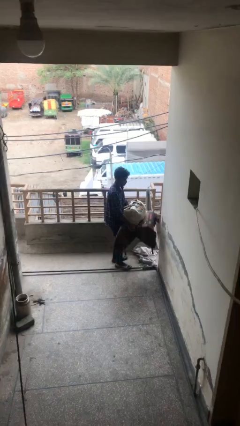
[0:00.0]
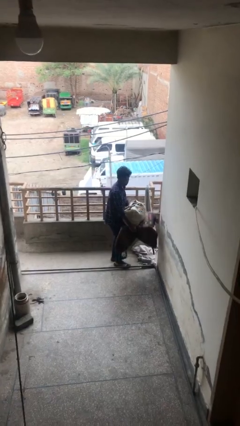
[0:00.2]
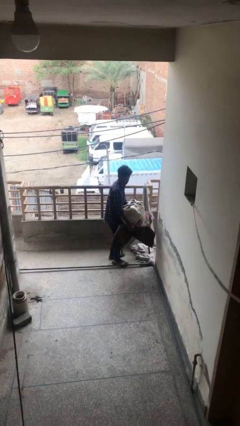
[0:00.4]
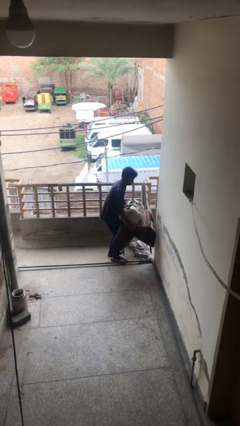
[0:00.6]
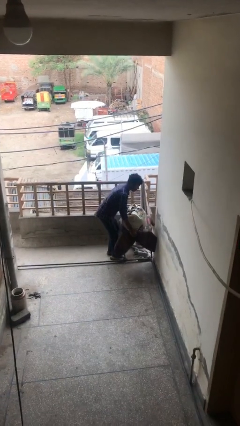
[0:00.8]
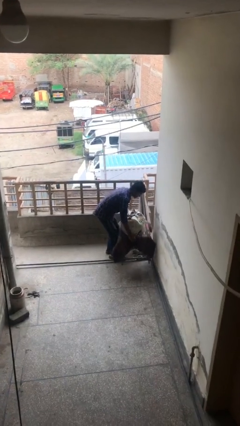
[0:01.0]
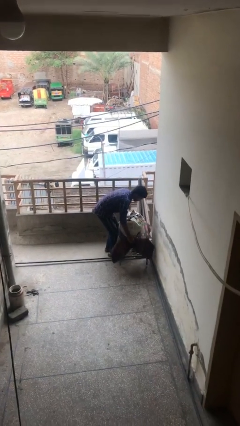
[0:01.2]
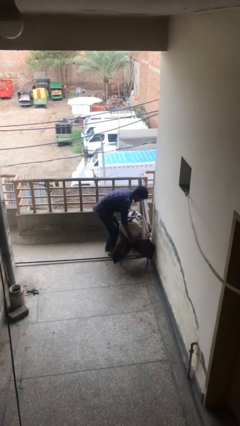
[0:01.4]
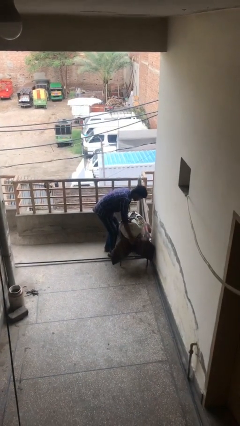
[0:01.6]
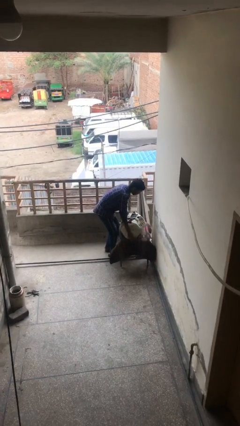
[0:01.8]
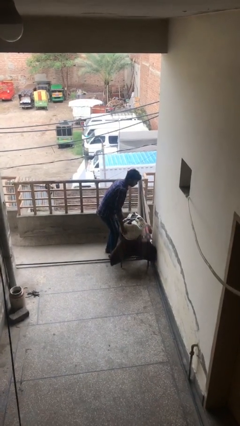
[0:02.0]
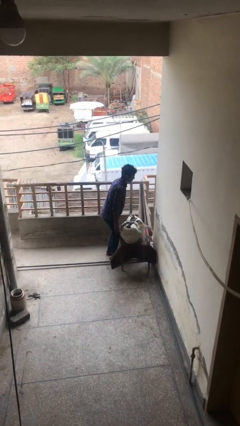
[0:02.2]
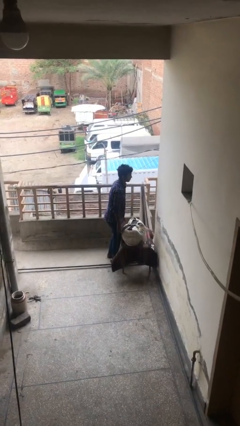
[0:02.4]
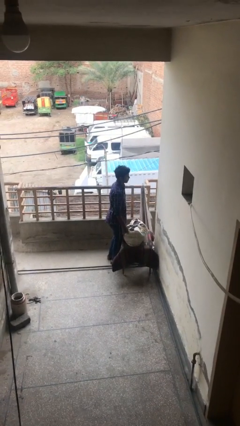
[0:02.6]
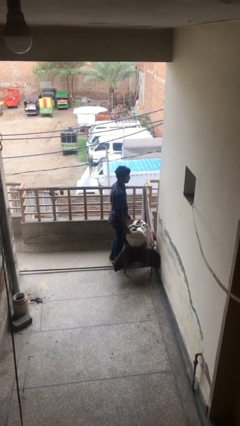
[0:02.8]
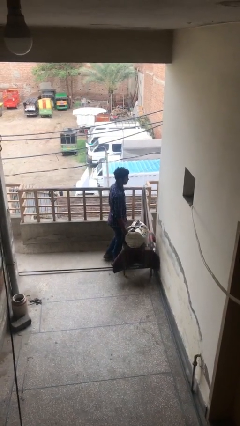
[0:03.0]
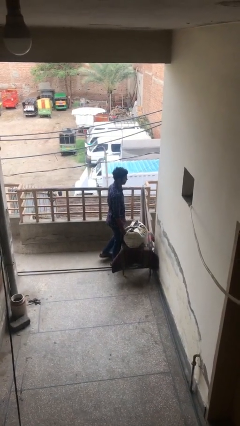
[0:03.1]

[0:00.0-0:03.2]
person puts down object on floor

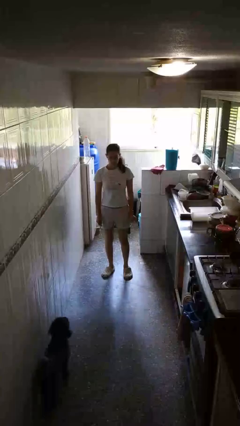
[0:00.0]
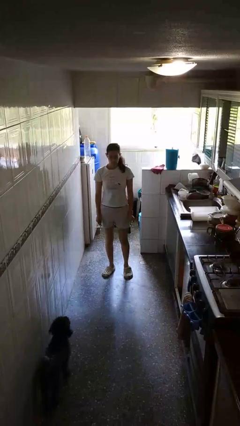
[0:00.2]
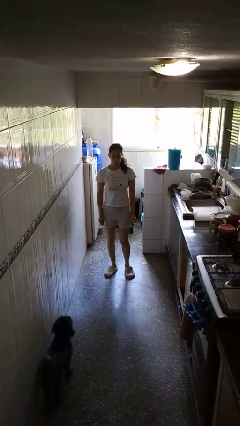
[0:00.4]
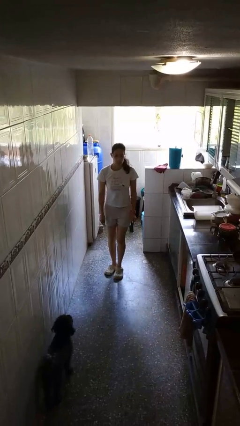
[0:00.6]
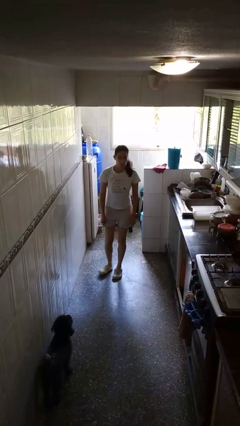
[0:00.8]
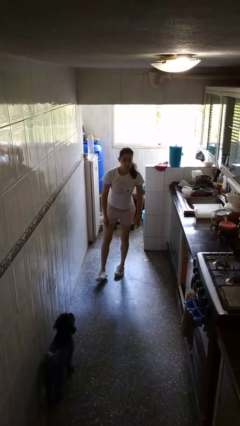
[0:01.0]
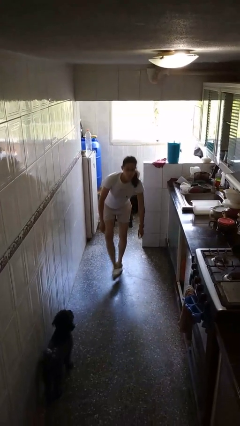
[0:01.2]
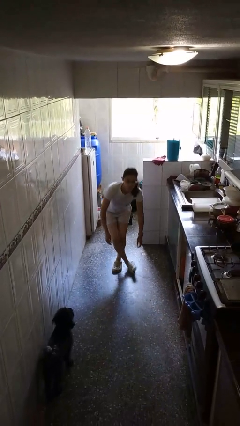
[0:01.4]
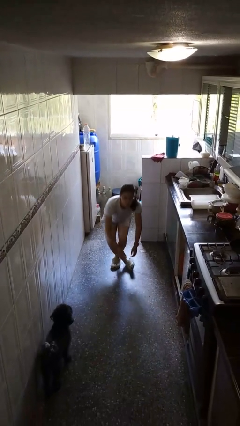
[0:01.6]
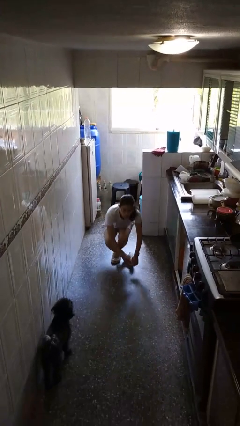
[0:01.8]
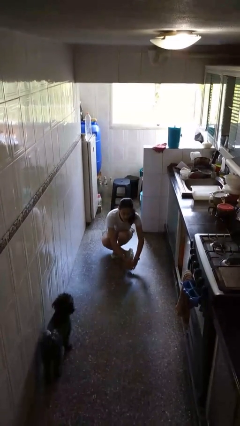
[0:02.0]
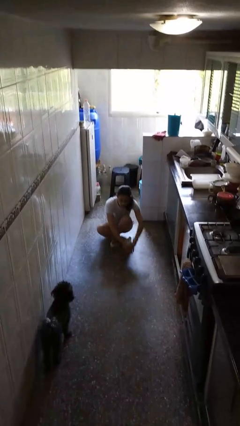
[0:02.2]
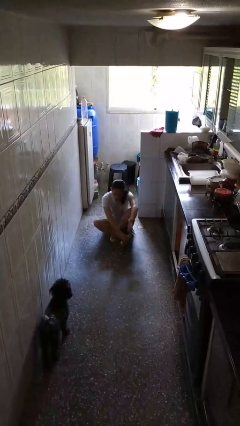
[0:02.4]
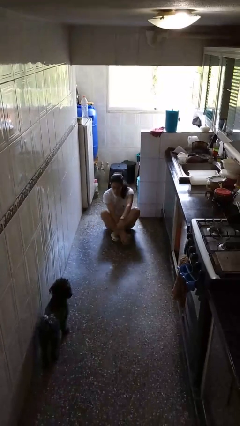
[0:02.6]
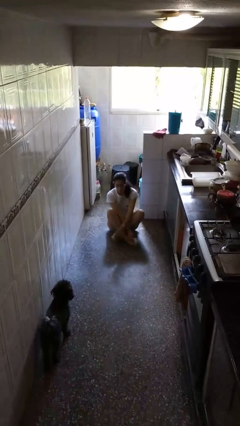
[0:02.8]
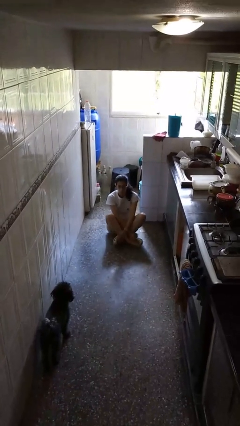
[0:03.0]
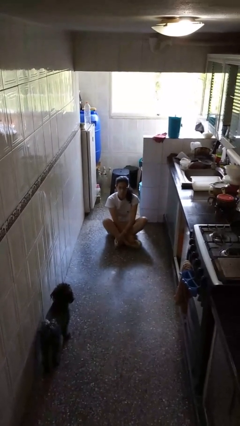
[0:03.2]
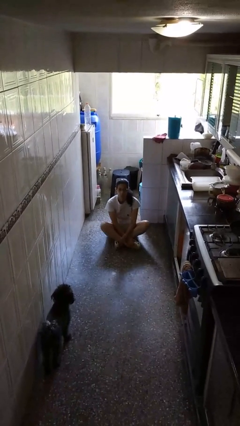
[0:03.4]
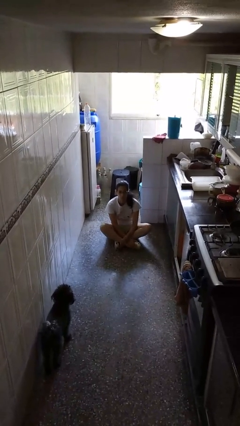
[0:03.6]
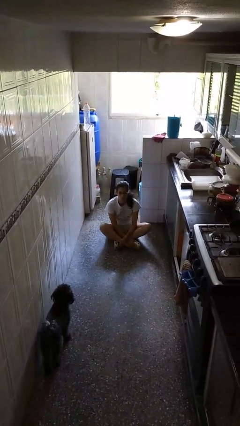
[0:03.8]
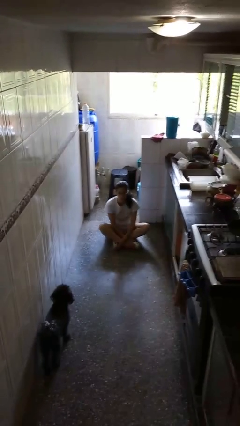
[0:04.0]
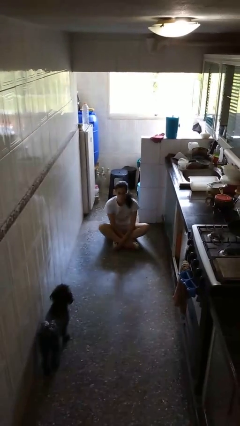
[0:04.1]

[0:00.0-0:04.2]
person sits crisscross

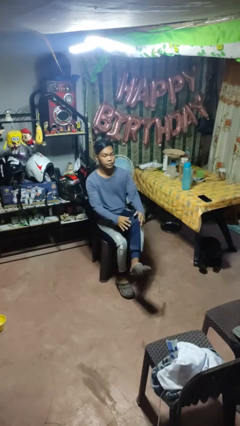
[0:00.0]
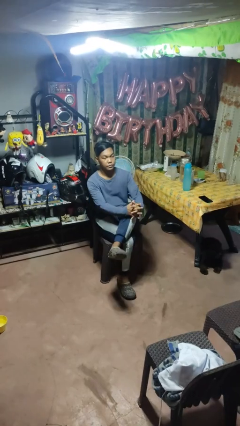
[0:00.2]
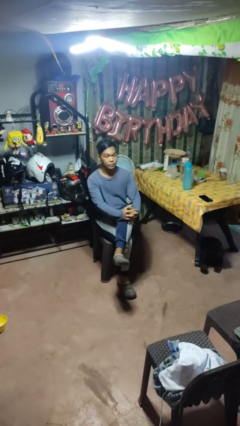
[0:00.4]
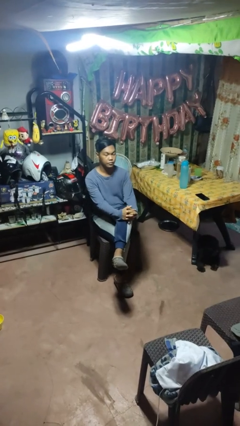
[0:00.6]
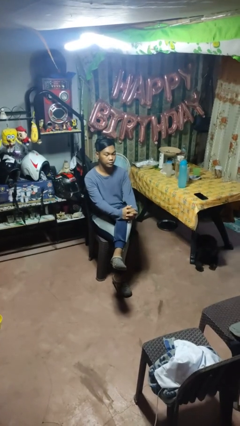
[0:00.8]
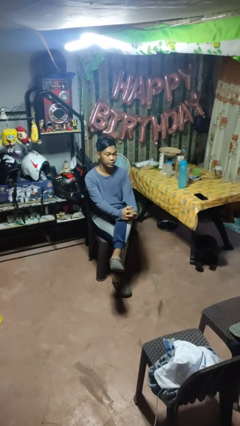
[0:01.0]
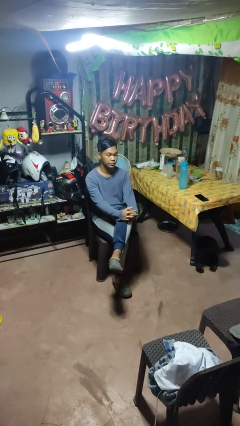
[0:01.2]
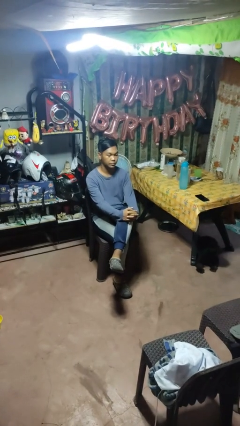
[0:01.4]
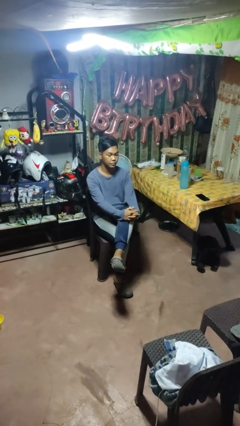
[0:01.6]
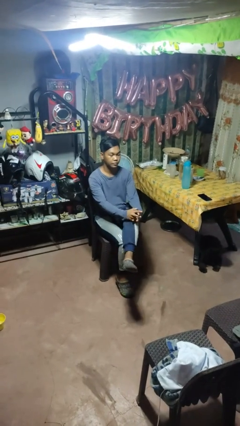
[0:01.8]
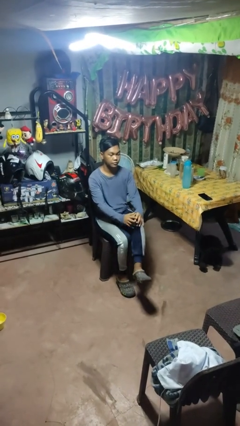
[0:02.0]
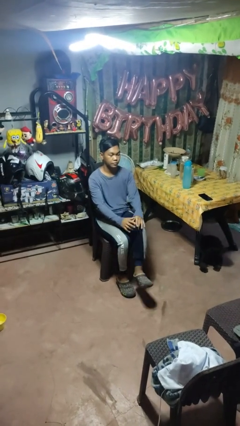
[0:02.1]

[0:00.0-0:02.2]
person crosses legs

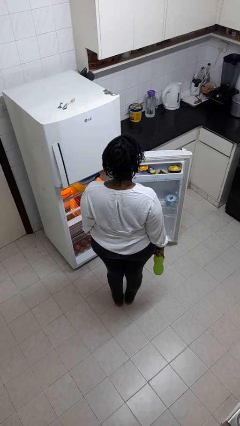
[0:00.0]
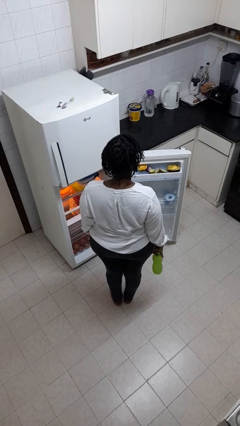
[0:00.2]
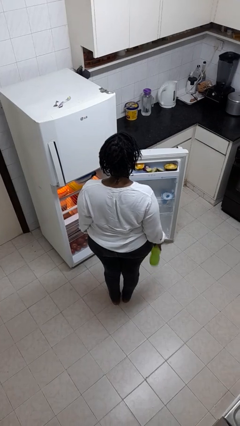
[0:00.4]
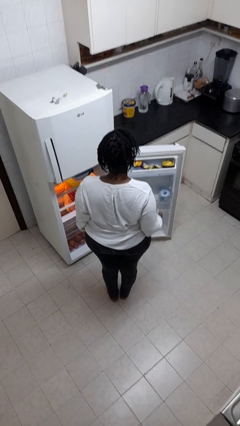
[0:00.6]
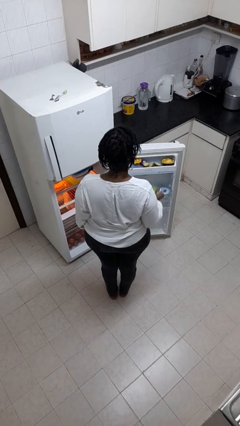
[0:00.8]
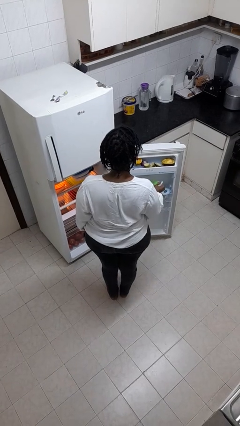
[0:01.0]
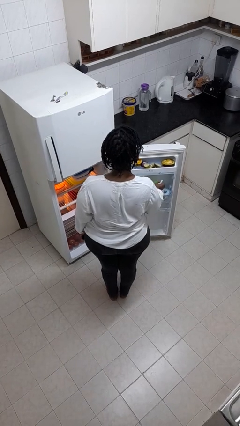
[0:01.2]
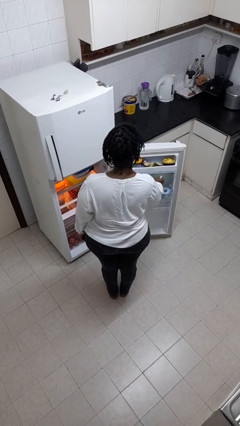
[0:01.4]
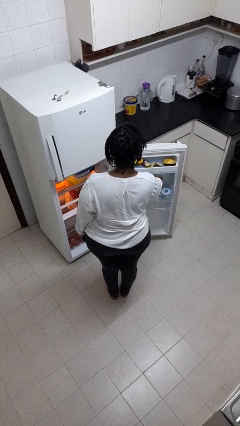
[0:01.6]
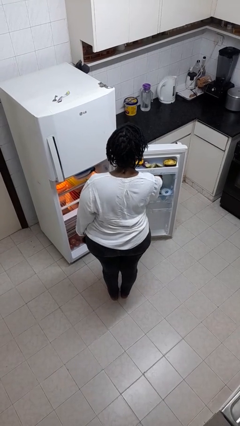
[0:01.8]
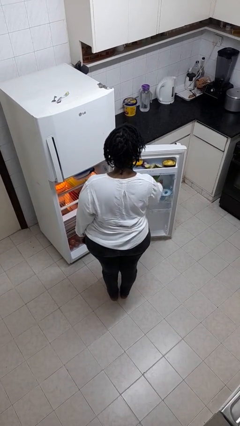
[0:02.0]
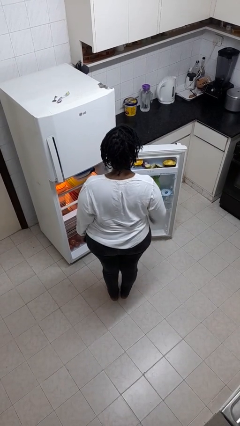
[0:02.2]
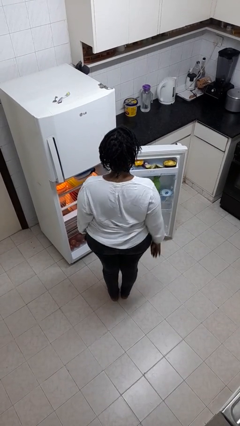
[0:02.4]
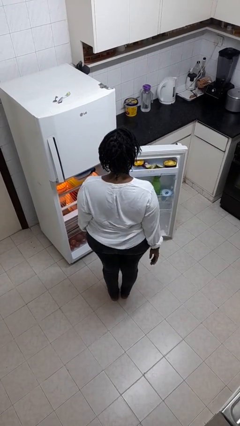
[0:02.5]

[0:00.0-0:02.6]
person puts object into refrigerator

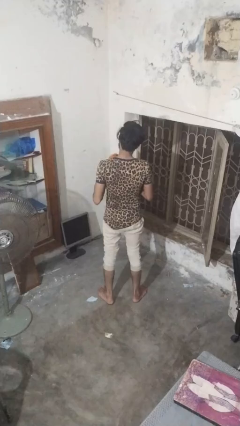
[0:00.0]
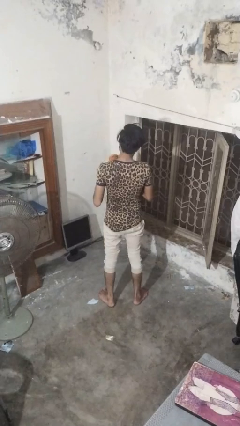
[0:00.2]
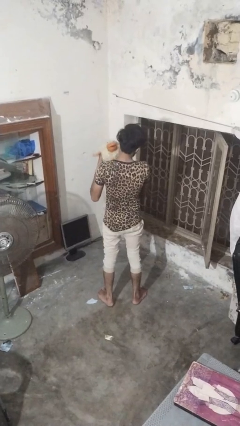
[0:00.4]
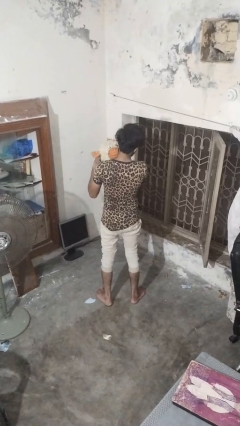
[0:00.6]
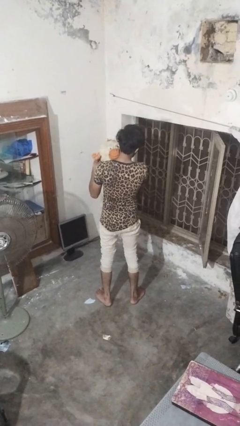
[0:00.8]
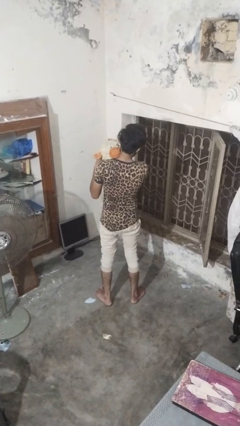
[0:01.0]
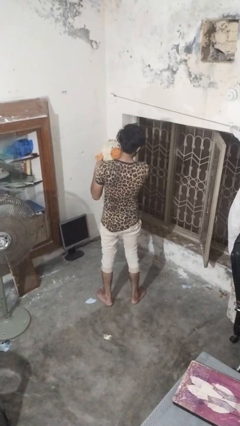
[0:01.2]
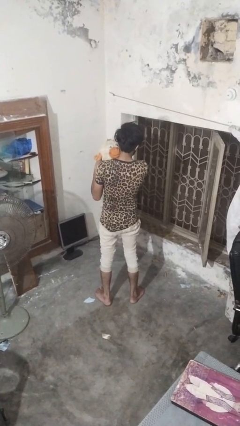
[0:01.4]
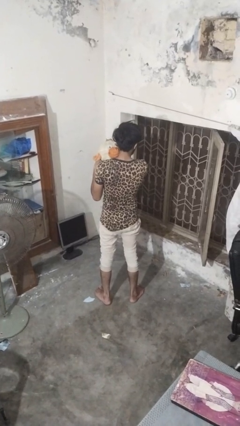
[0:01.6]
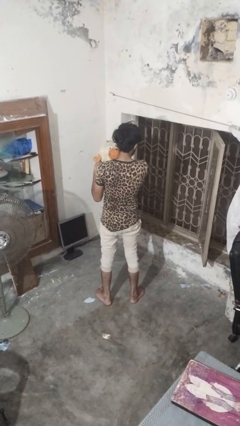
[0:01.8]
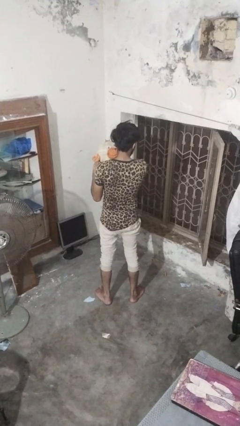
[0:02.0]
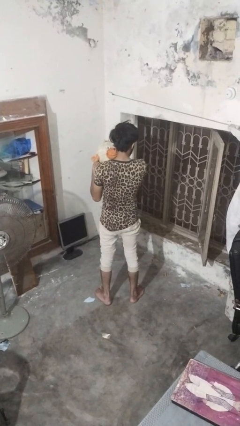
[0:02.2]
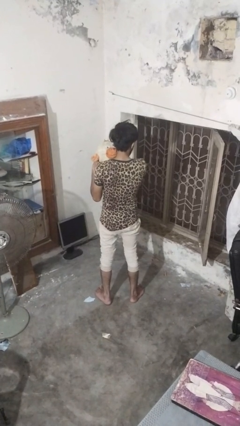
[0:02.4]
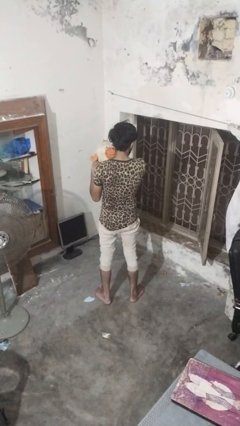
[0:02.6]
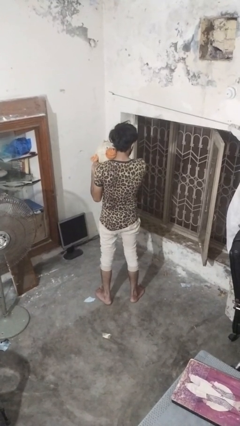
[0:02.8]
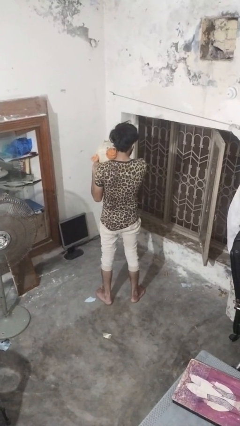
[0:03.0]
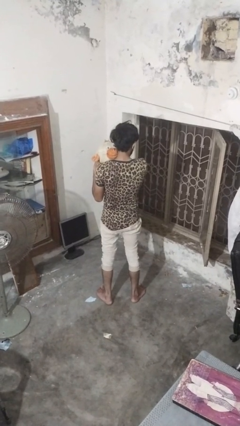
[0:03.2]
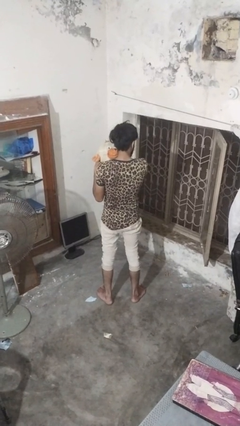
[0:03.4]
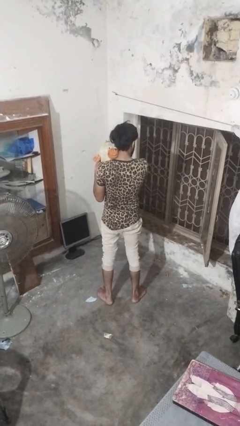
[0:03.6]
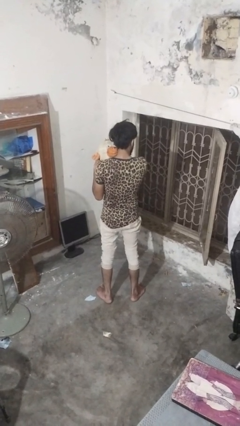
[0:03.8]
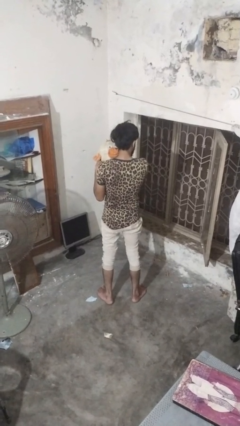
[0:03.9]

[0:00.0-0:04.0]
person hugs stuffed animal

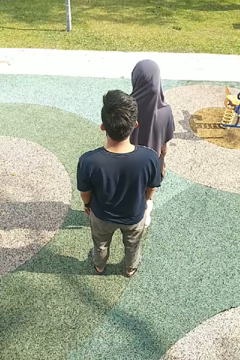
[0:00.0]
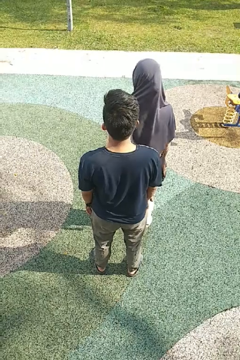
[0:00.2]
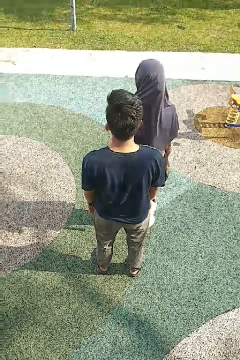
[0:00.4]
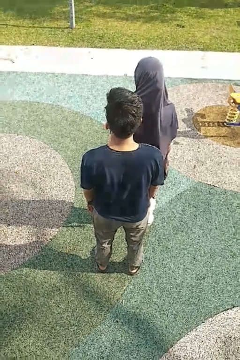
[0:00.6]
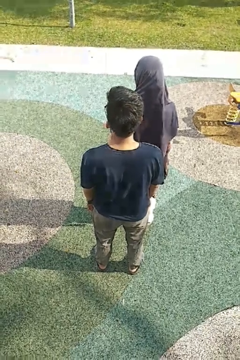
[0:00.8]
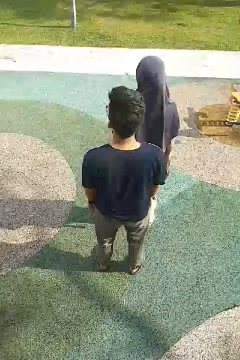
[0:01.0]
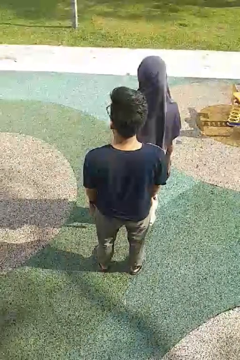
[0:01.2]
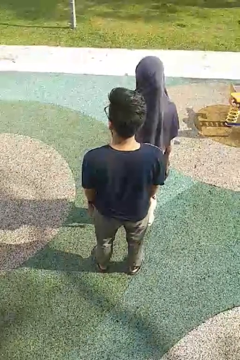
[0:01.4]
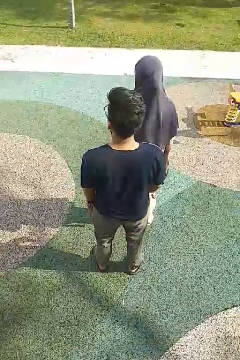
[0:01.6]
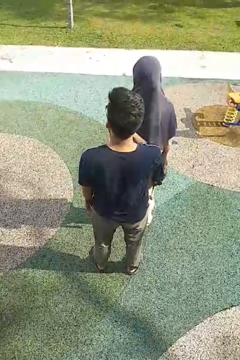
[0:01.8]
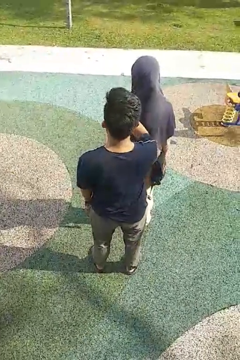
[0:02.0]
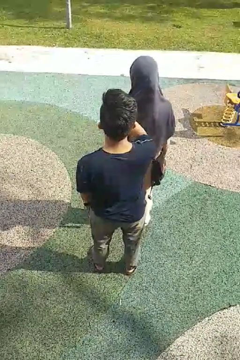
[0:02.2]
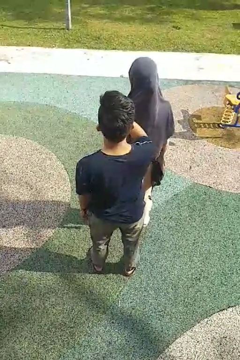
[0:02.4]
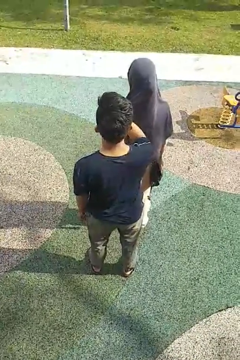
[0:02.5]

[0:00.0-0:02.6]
person grabs person by shoulder
